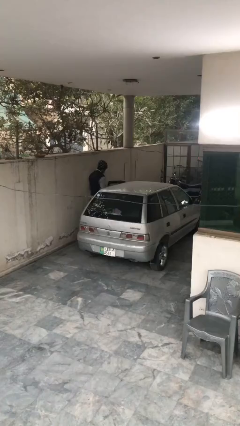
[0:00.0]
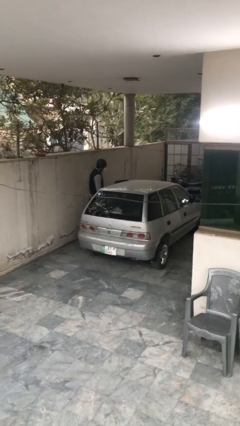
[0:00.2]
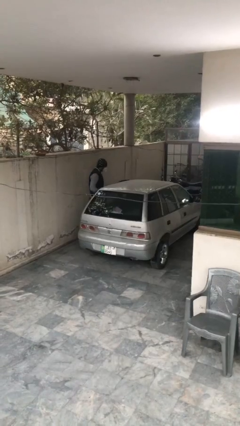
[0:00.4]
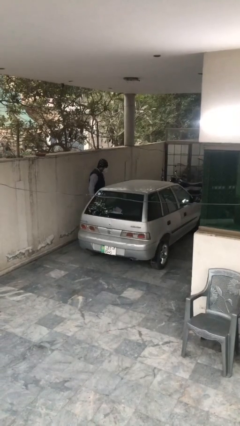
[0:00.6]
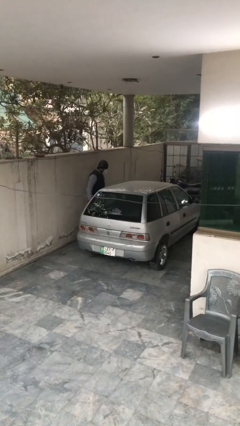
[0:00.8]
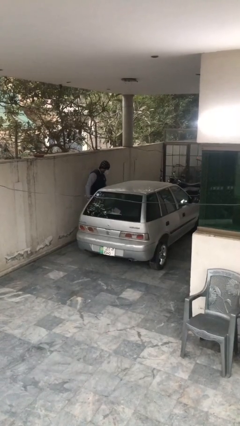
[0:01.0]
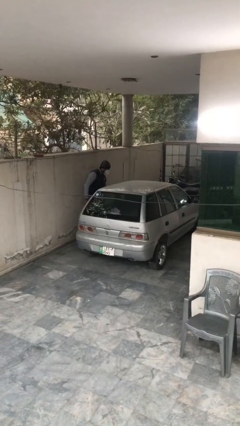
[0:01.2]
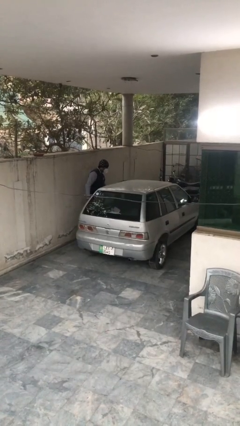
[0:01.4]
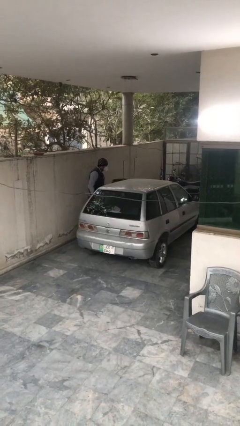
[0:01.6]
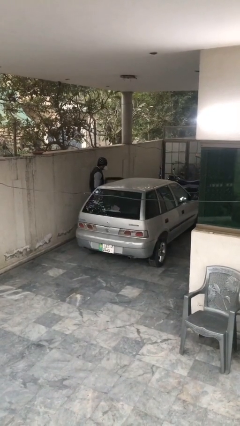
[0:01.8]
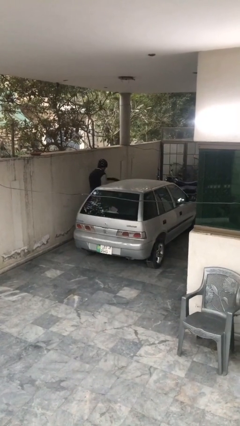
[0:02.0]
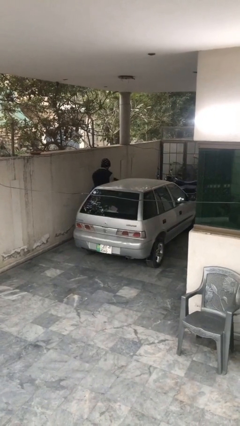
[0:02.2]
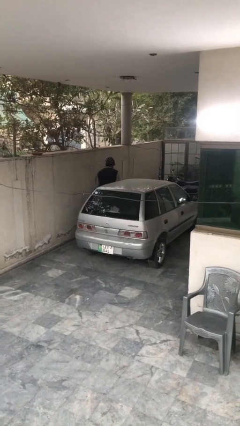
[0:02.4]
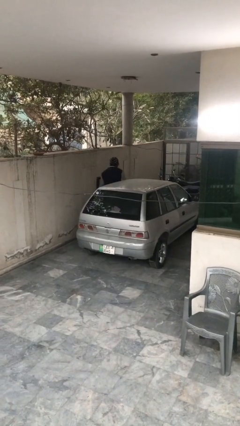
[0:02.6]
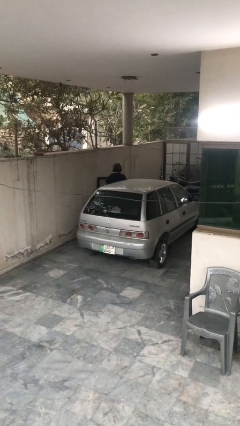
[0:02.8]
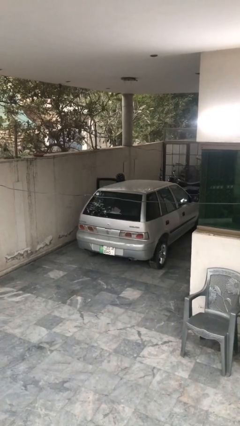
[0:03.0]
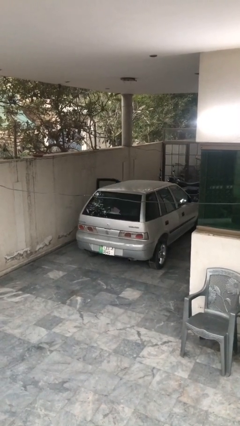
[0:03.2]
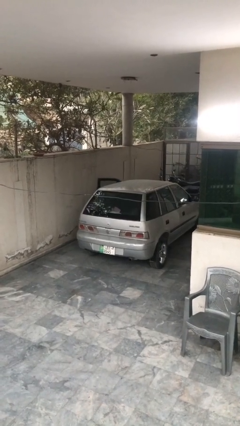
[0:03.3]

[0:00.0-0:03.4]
car picks up person

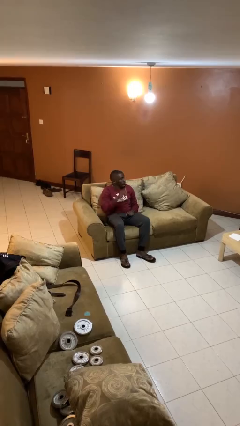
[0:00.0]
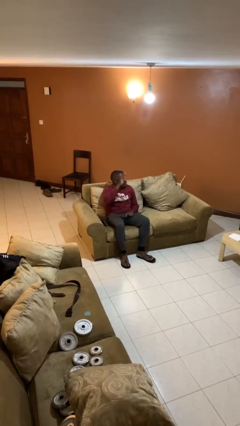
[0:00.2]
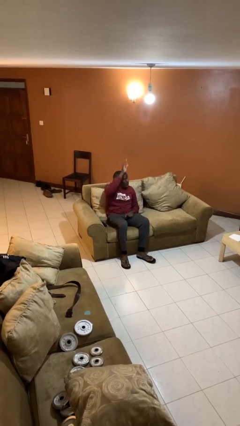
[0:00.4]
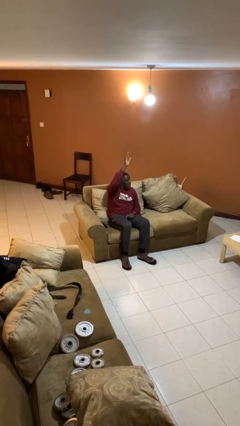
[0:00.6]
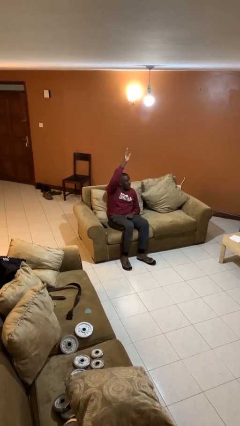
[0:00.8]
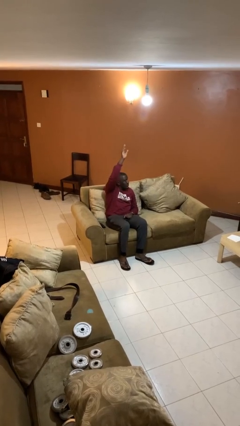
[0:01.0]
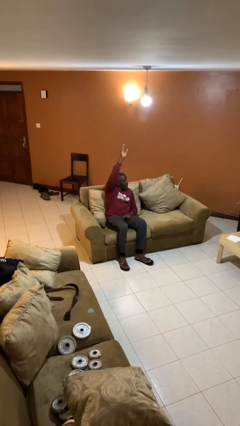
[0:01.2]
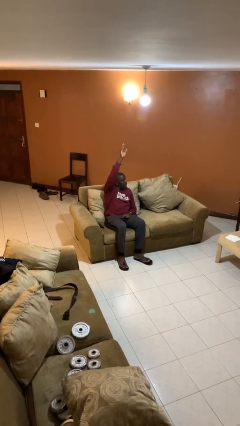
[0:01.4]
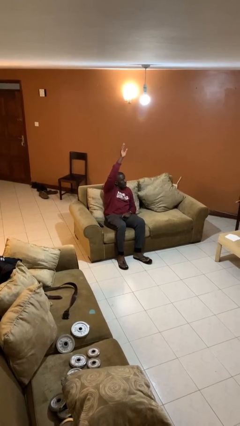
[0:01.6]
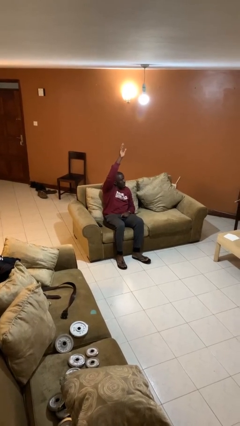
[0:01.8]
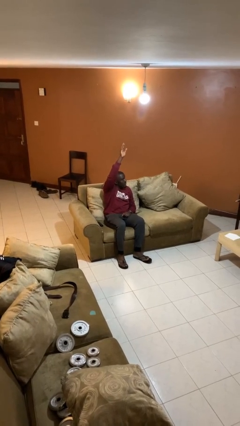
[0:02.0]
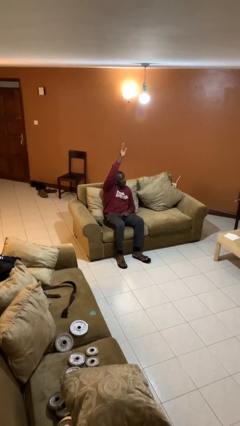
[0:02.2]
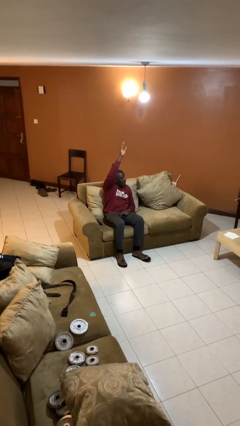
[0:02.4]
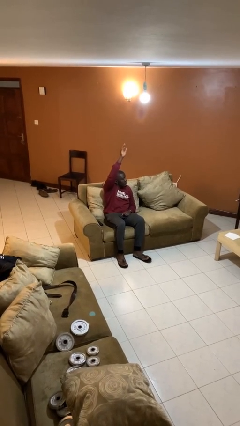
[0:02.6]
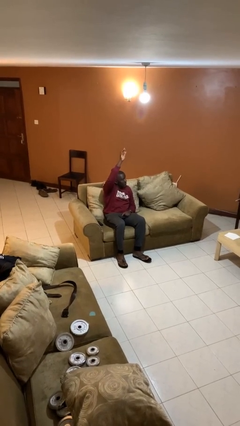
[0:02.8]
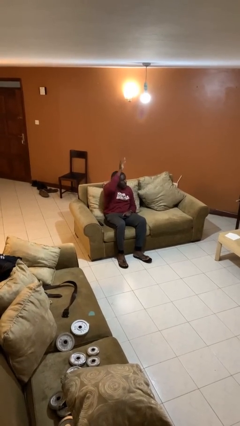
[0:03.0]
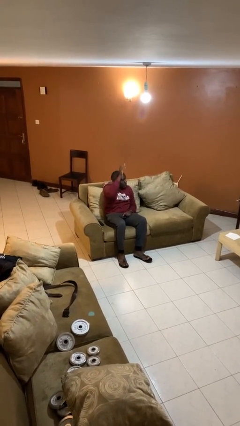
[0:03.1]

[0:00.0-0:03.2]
person gestures raise hand

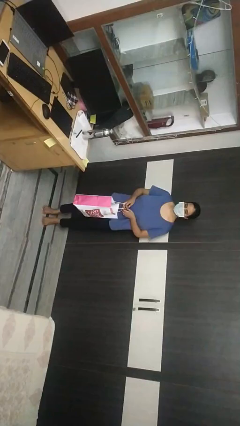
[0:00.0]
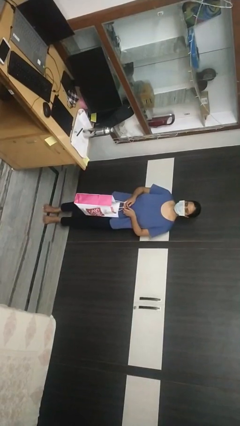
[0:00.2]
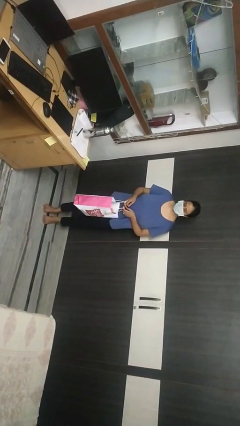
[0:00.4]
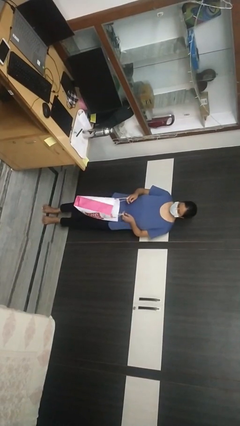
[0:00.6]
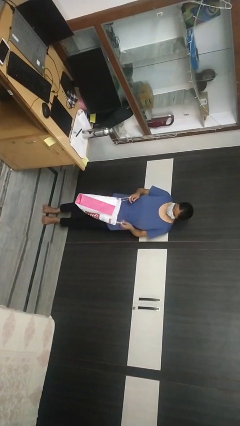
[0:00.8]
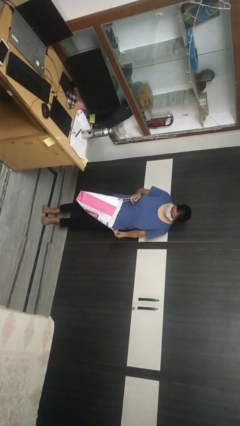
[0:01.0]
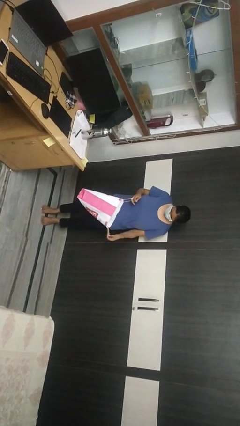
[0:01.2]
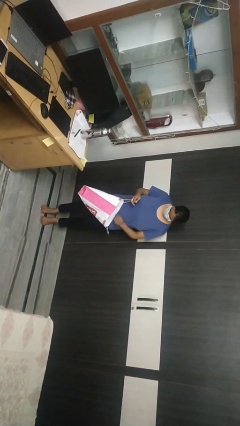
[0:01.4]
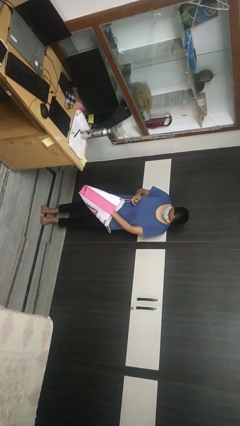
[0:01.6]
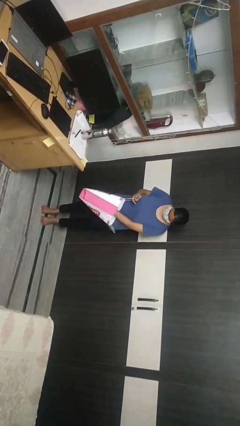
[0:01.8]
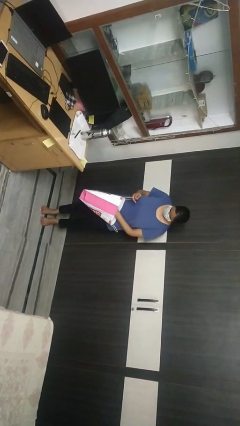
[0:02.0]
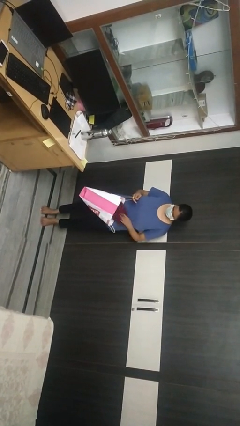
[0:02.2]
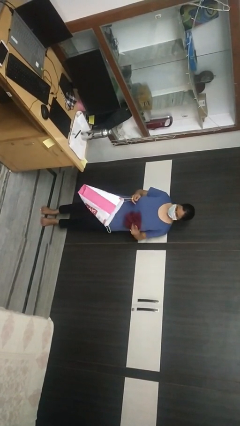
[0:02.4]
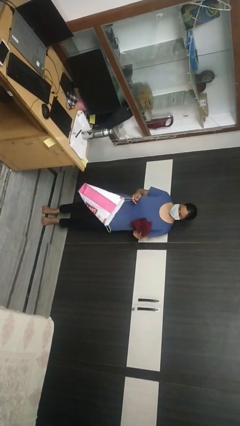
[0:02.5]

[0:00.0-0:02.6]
person takes object from bag

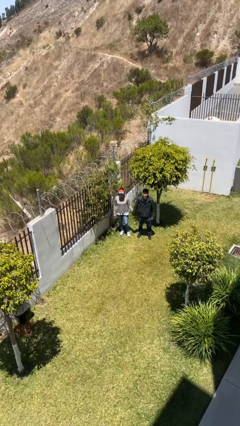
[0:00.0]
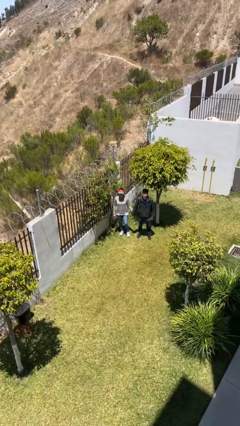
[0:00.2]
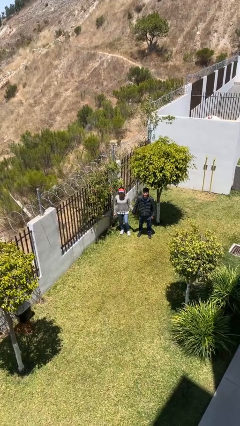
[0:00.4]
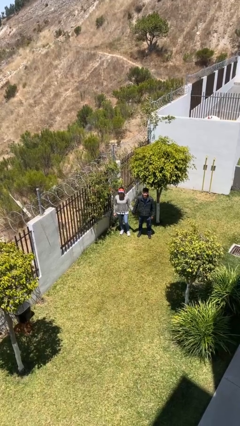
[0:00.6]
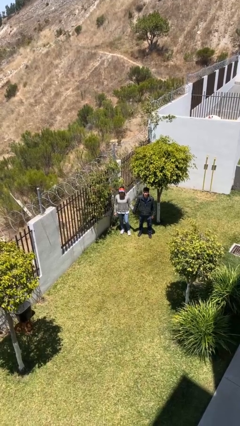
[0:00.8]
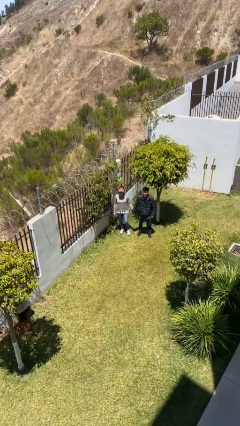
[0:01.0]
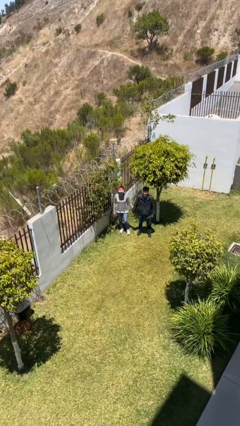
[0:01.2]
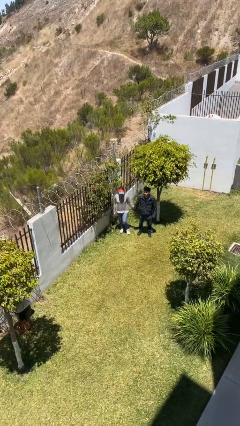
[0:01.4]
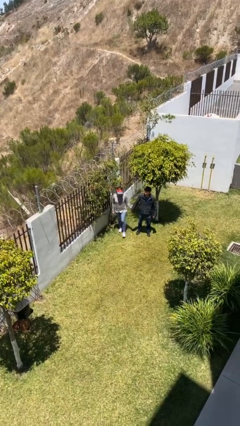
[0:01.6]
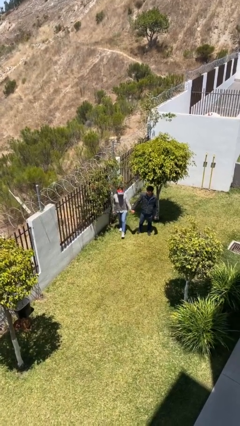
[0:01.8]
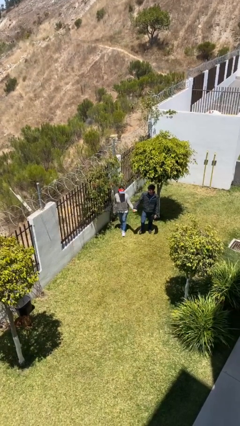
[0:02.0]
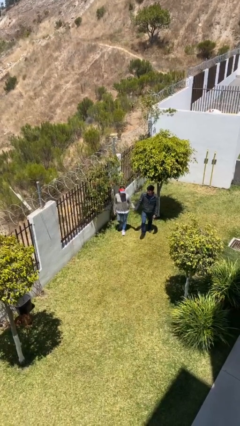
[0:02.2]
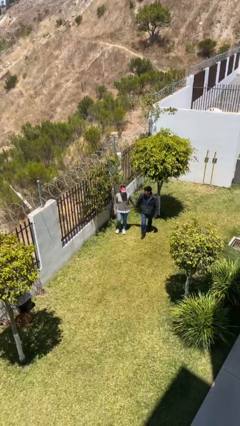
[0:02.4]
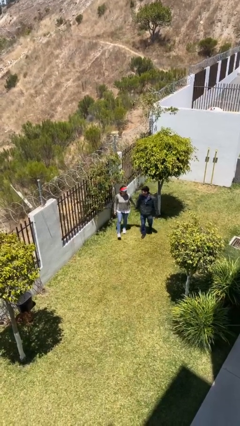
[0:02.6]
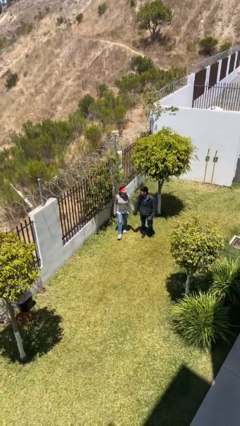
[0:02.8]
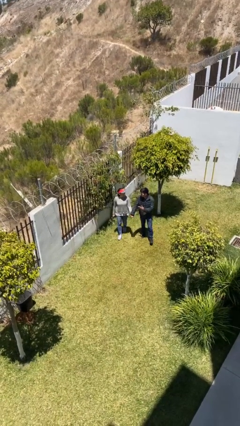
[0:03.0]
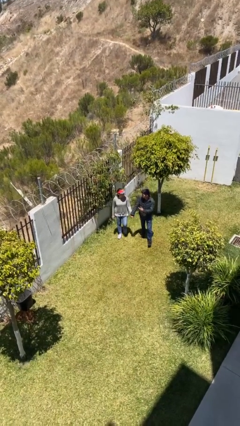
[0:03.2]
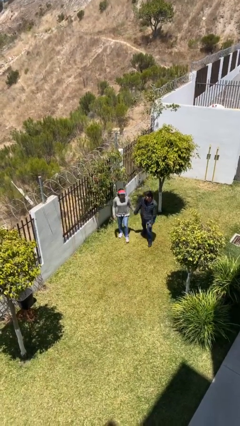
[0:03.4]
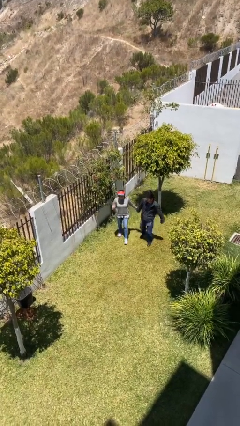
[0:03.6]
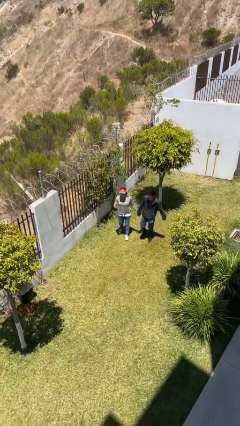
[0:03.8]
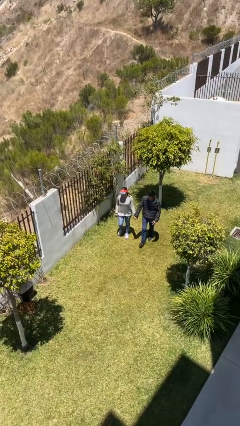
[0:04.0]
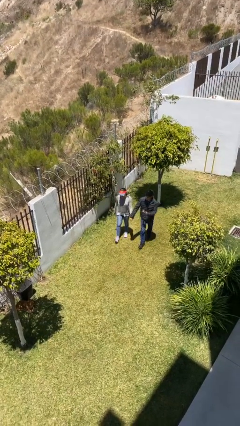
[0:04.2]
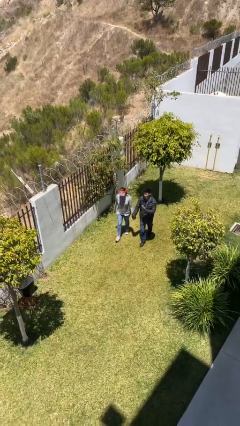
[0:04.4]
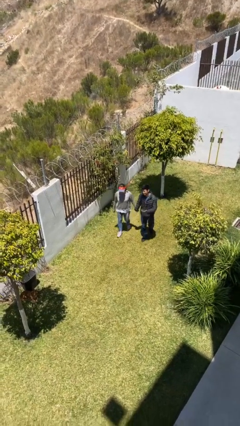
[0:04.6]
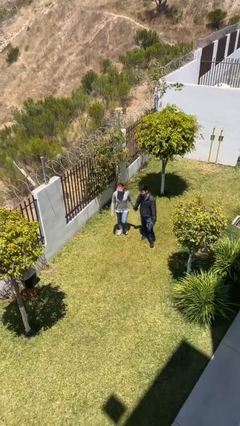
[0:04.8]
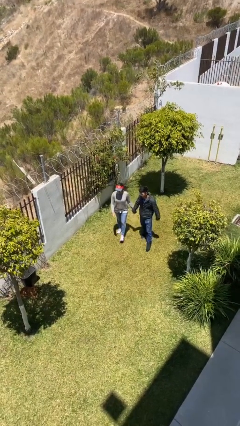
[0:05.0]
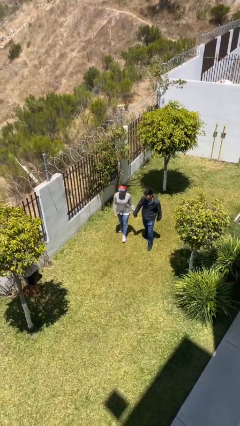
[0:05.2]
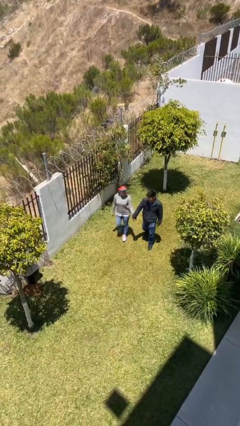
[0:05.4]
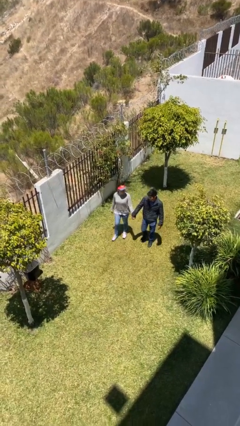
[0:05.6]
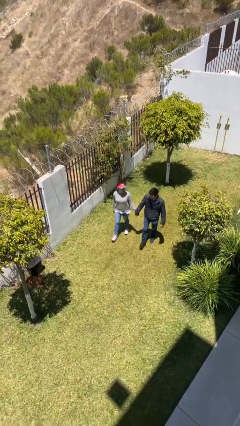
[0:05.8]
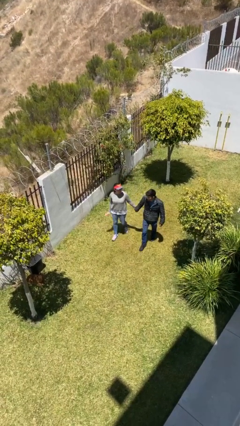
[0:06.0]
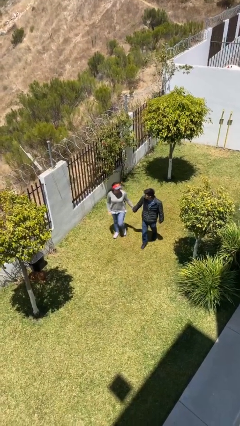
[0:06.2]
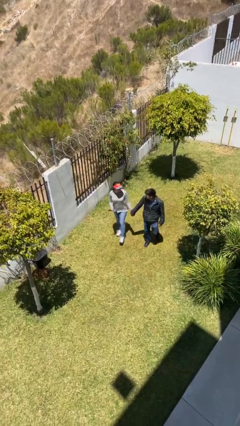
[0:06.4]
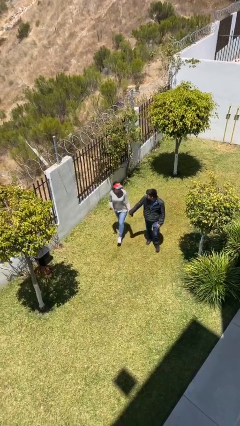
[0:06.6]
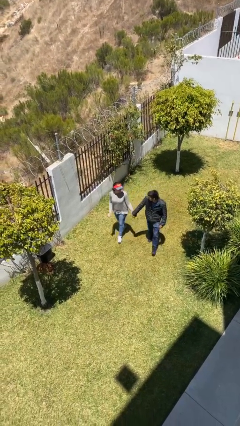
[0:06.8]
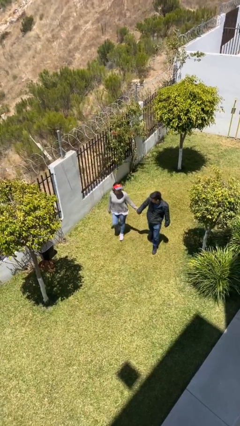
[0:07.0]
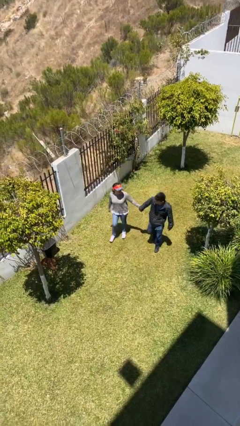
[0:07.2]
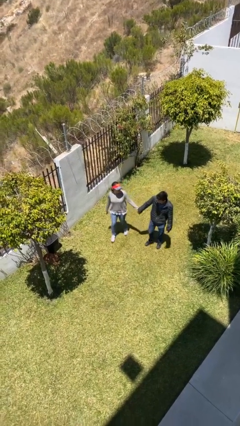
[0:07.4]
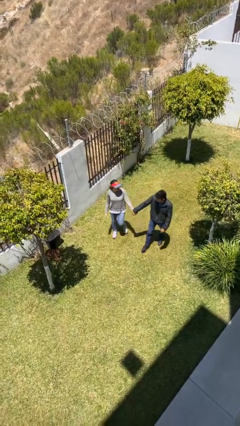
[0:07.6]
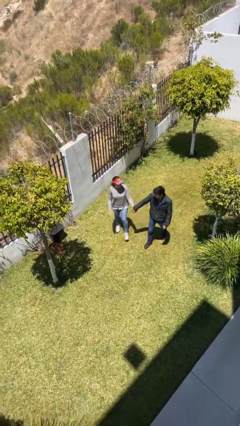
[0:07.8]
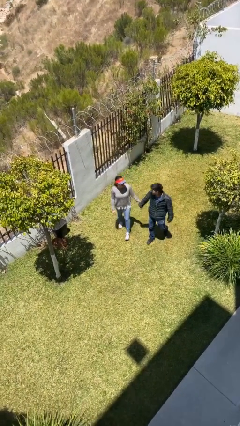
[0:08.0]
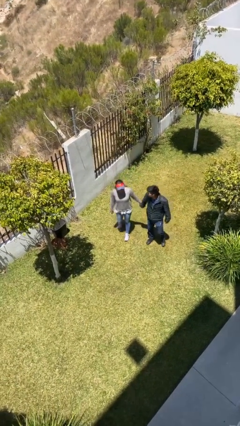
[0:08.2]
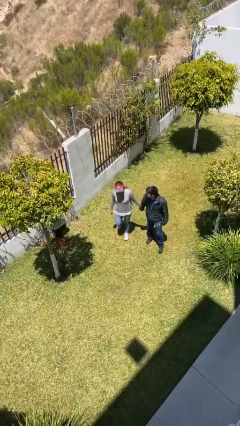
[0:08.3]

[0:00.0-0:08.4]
person holds hand
